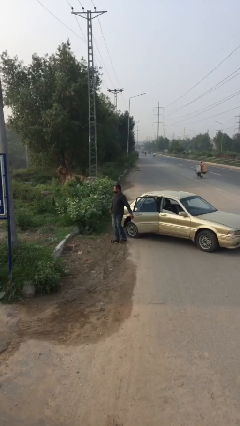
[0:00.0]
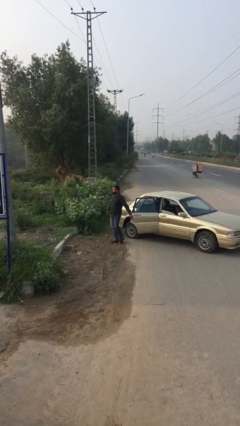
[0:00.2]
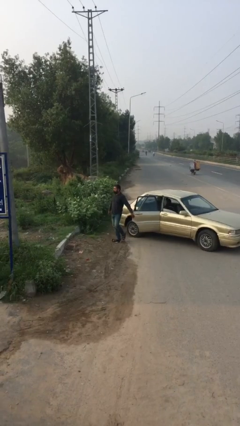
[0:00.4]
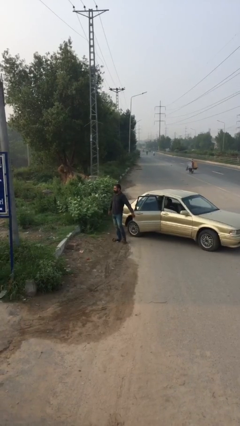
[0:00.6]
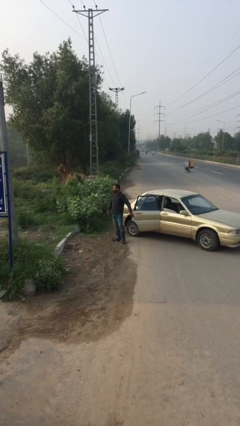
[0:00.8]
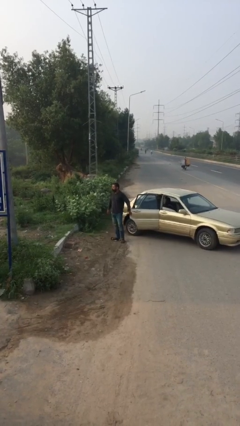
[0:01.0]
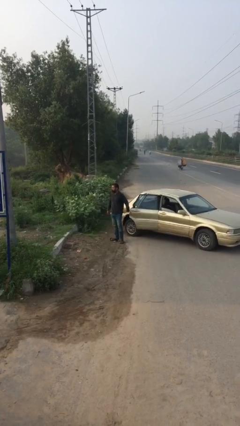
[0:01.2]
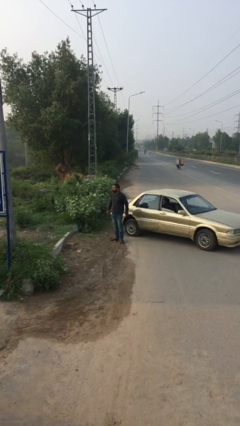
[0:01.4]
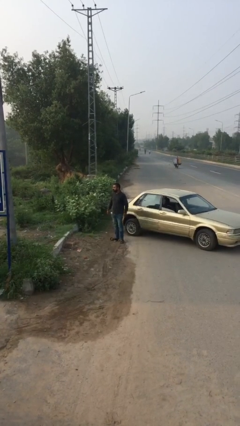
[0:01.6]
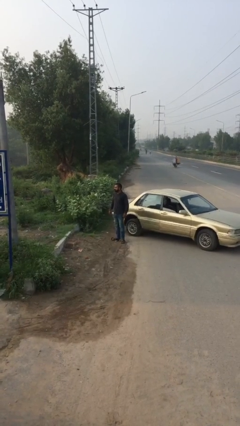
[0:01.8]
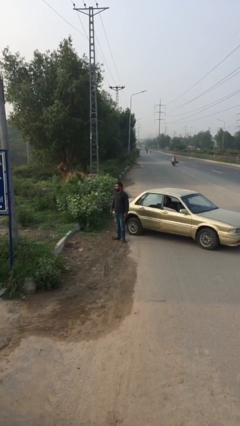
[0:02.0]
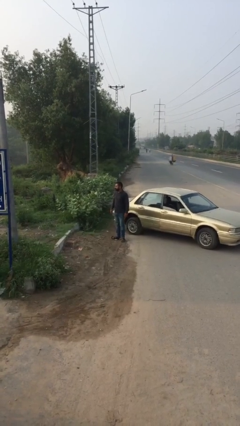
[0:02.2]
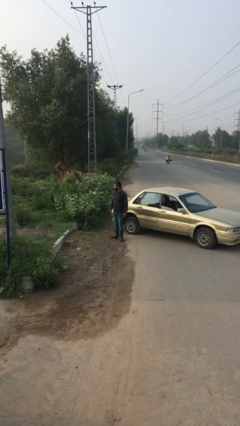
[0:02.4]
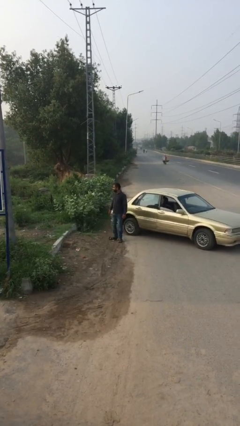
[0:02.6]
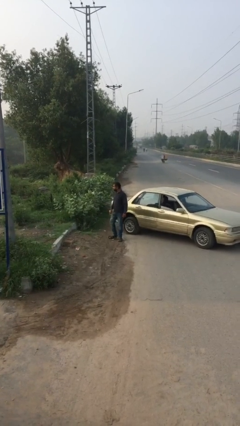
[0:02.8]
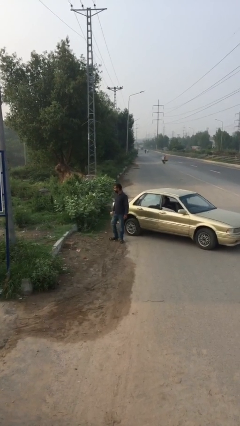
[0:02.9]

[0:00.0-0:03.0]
person closes car door

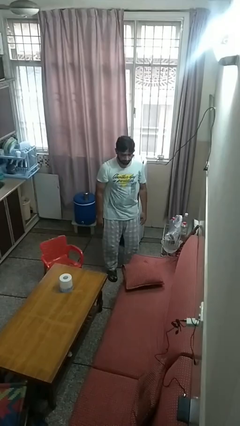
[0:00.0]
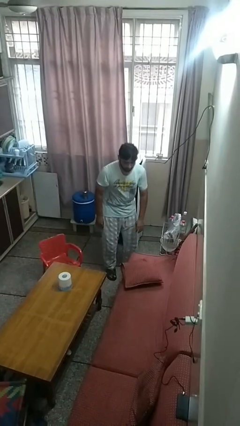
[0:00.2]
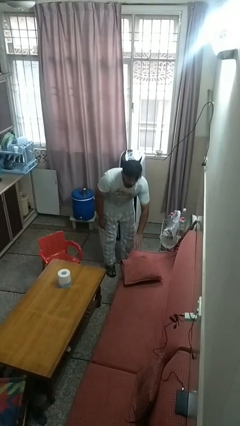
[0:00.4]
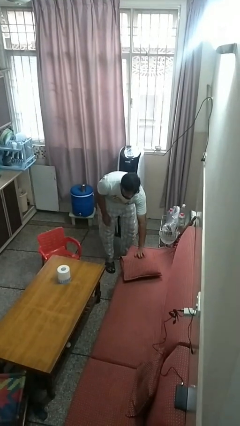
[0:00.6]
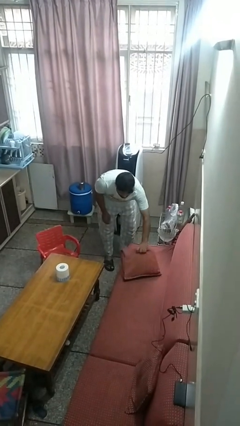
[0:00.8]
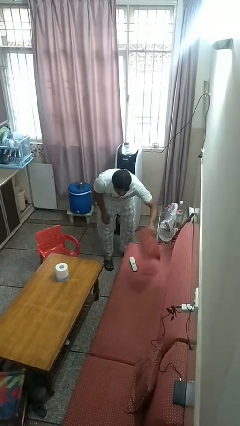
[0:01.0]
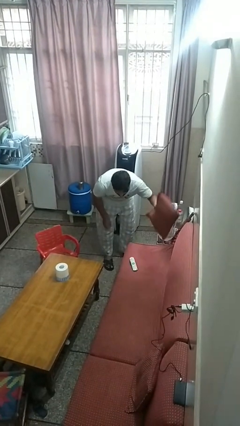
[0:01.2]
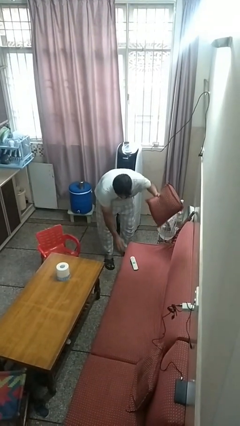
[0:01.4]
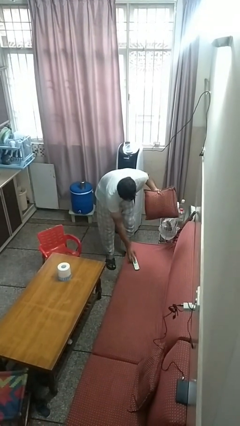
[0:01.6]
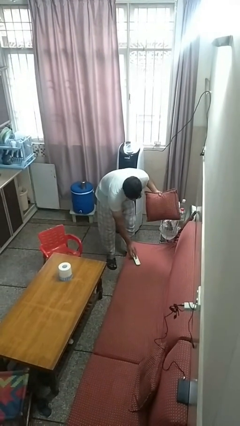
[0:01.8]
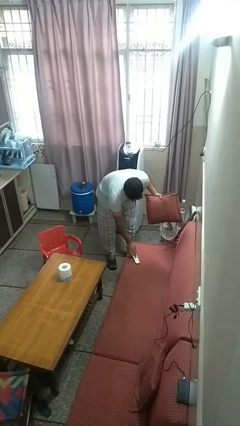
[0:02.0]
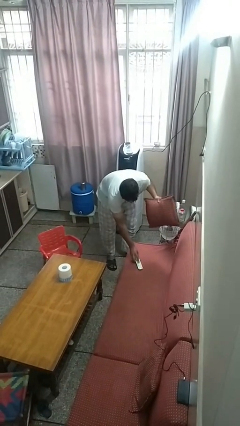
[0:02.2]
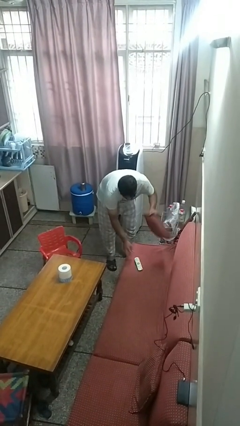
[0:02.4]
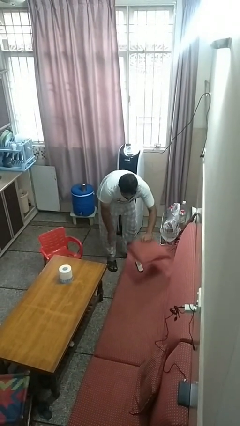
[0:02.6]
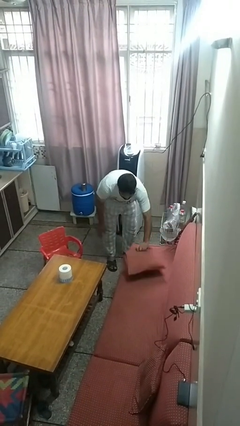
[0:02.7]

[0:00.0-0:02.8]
person searches in couch

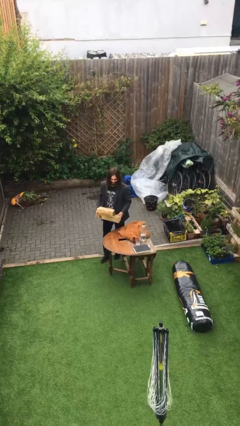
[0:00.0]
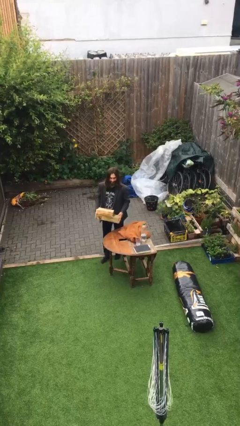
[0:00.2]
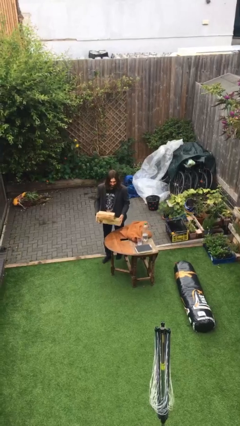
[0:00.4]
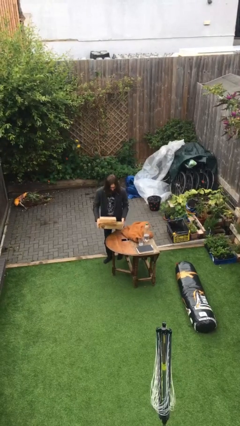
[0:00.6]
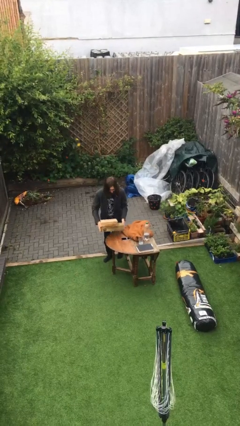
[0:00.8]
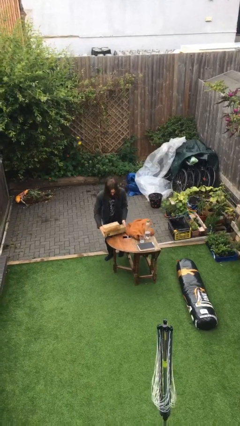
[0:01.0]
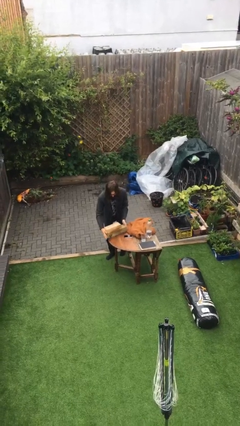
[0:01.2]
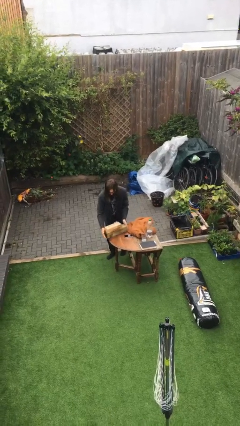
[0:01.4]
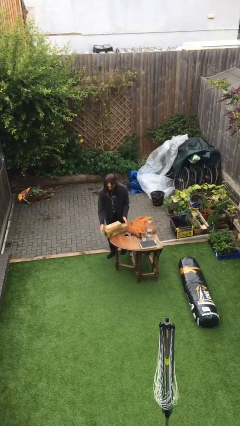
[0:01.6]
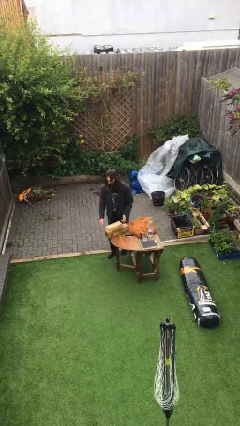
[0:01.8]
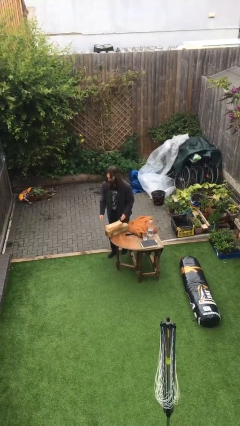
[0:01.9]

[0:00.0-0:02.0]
person puts down object on table

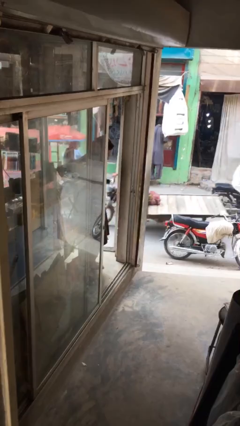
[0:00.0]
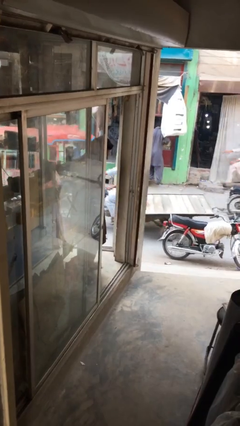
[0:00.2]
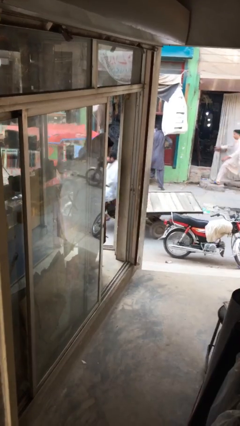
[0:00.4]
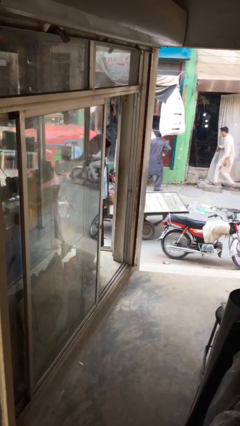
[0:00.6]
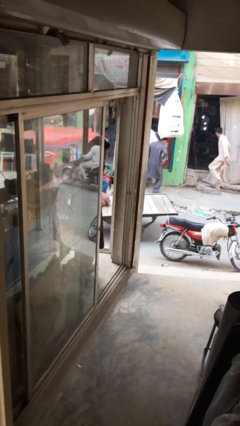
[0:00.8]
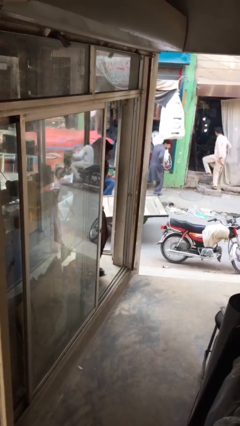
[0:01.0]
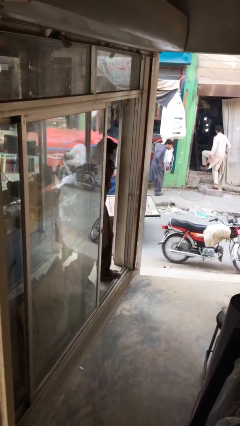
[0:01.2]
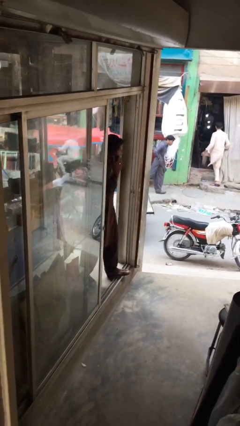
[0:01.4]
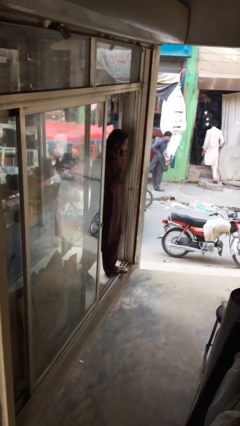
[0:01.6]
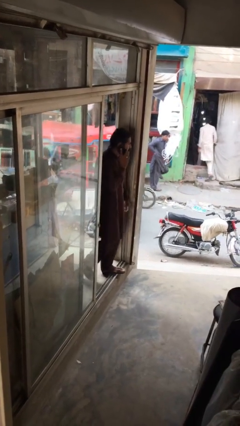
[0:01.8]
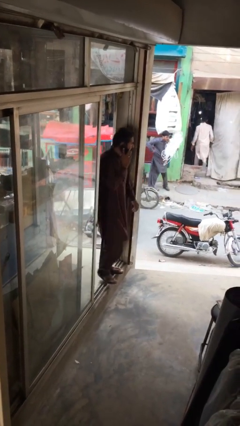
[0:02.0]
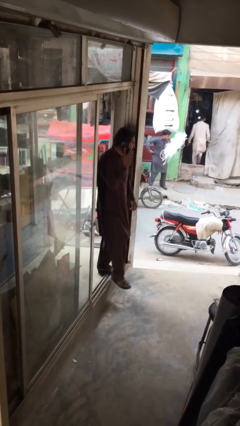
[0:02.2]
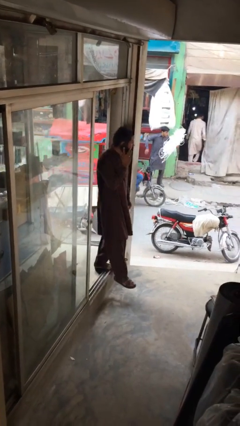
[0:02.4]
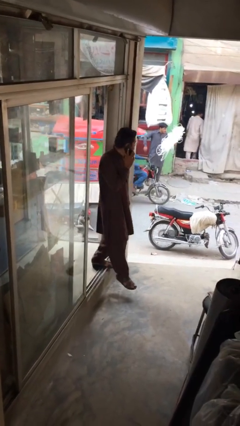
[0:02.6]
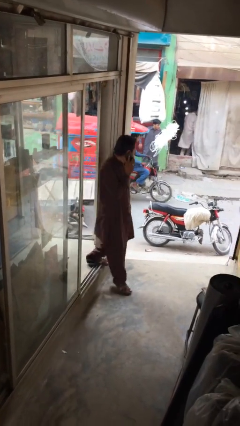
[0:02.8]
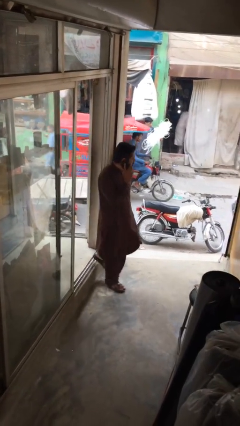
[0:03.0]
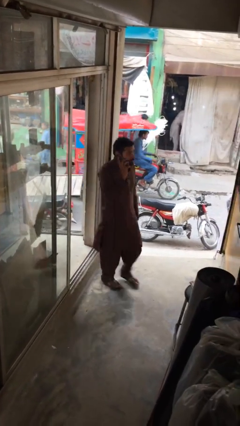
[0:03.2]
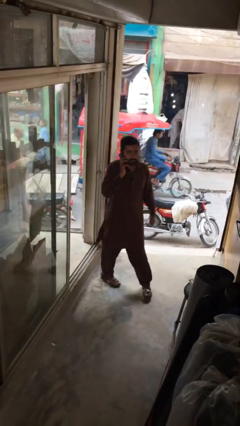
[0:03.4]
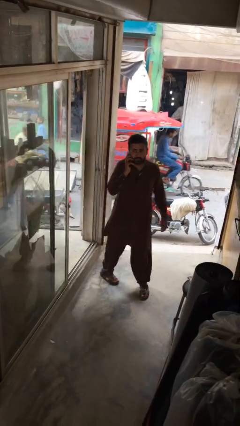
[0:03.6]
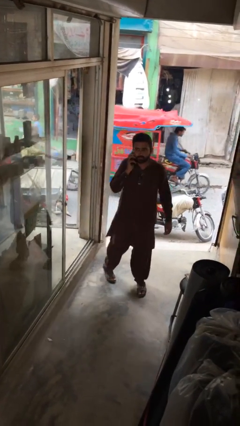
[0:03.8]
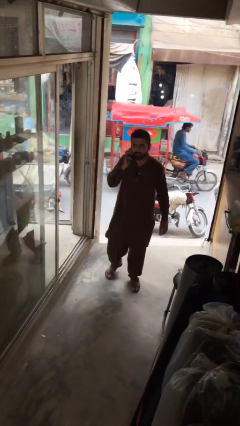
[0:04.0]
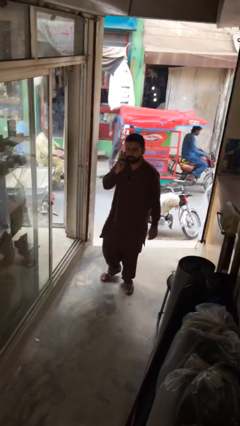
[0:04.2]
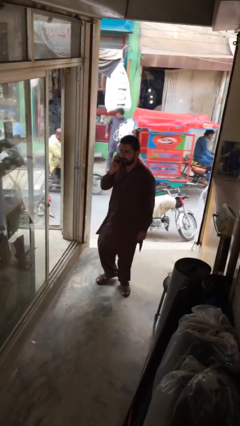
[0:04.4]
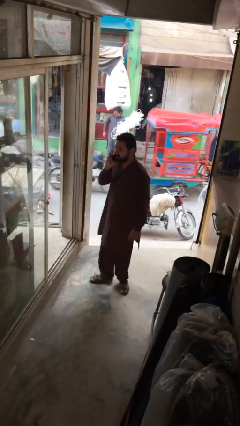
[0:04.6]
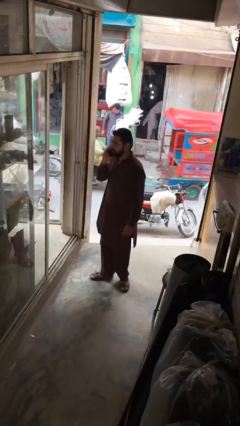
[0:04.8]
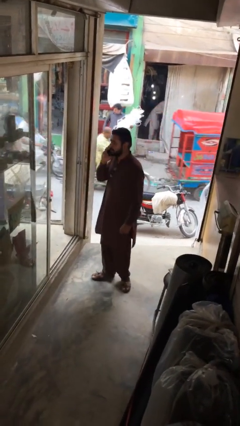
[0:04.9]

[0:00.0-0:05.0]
person enters scene through structure

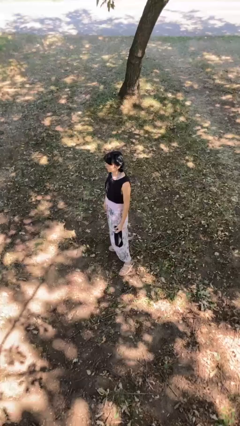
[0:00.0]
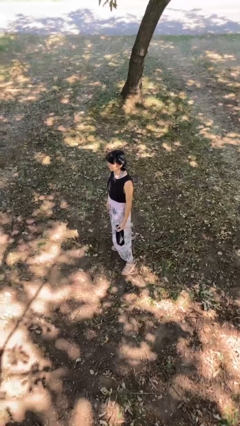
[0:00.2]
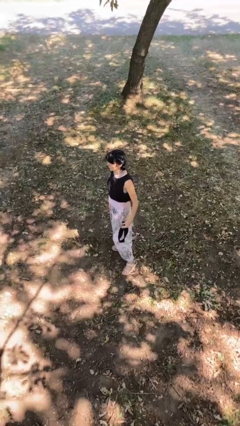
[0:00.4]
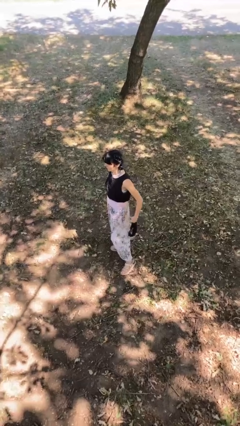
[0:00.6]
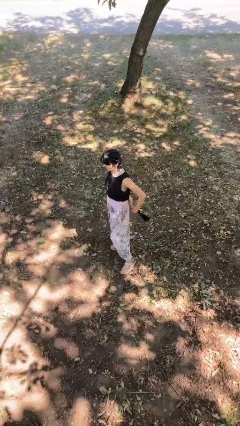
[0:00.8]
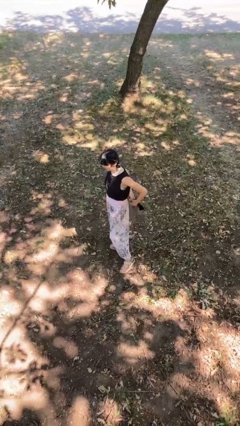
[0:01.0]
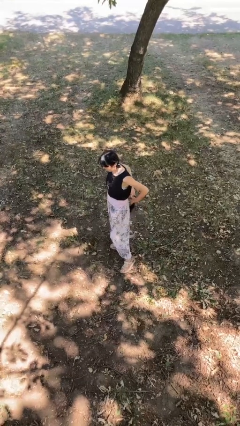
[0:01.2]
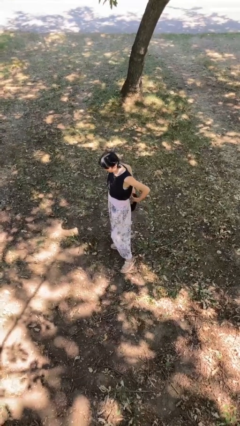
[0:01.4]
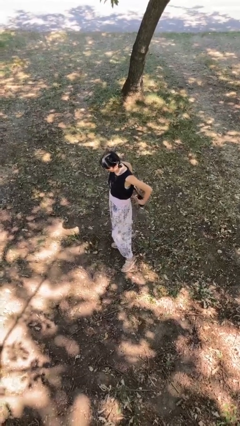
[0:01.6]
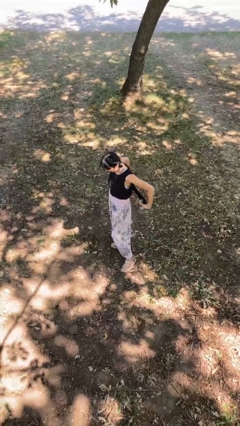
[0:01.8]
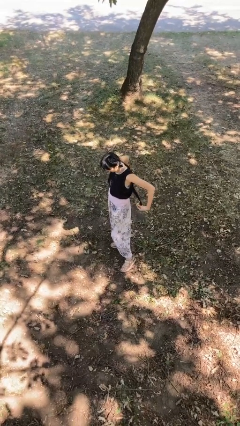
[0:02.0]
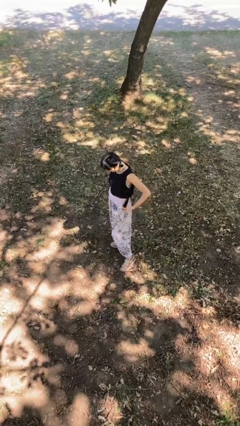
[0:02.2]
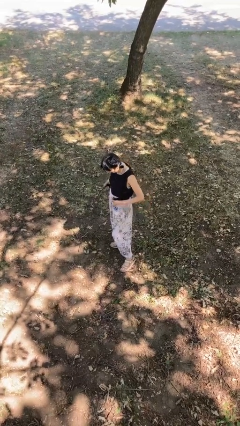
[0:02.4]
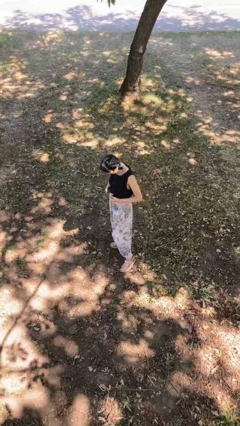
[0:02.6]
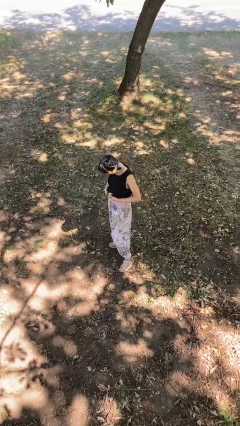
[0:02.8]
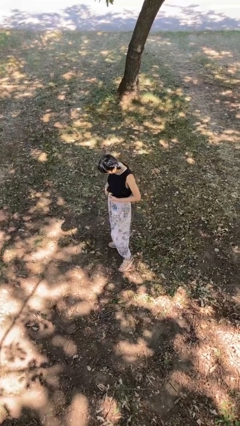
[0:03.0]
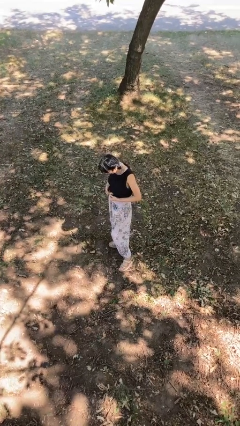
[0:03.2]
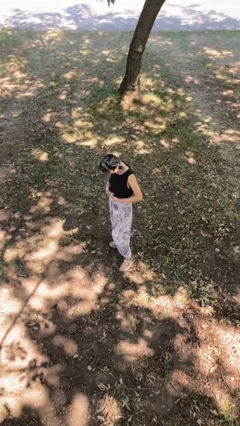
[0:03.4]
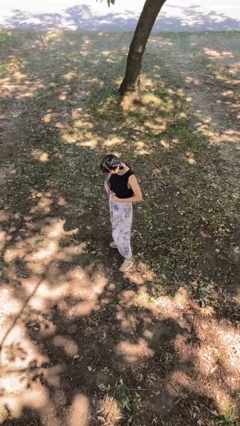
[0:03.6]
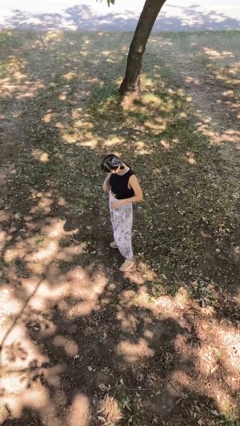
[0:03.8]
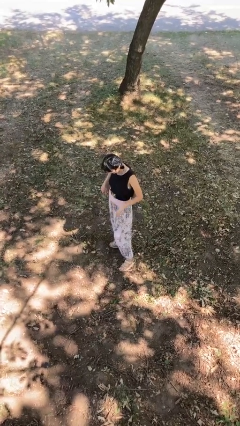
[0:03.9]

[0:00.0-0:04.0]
person puts on belt

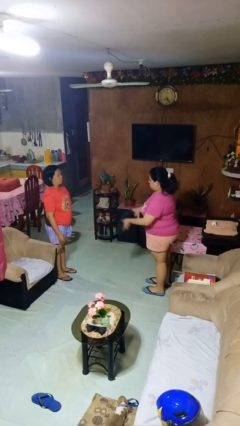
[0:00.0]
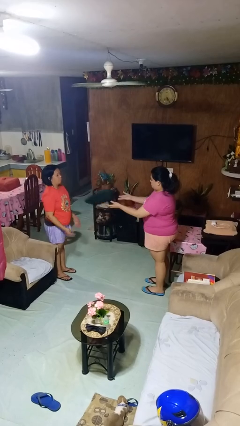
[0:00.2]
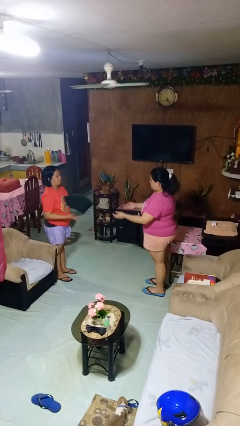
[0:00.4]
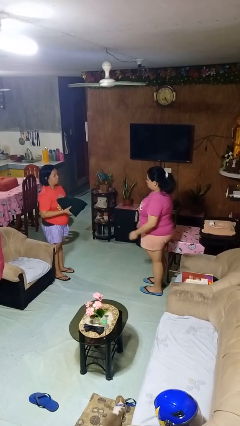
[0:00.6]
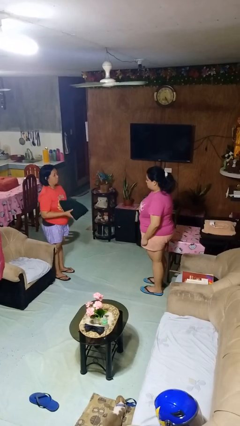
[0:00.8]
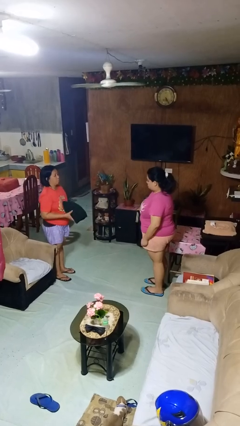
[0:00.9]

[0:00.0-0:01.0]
person throws object to person
